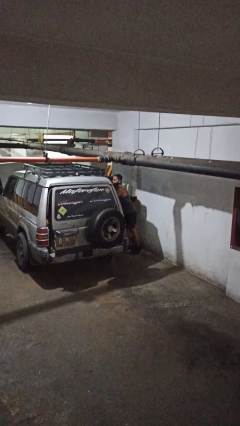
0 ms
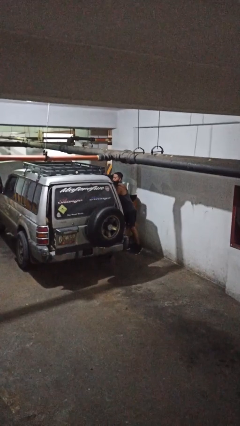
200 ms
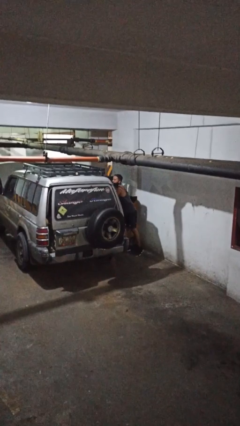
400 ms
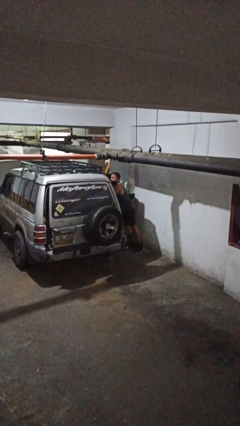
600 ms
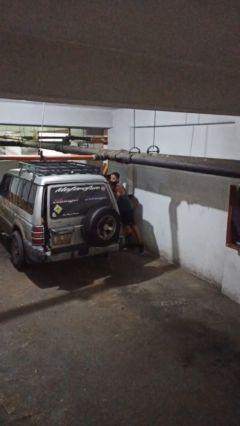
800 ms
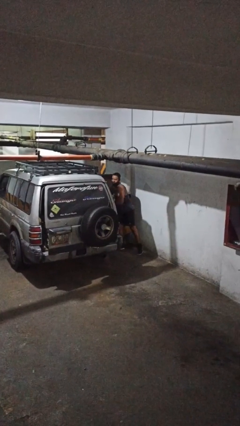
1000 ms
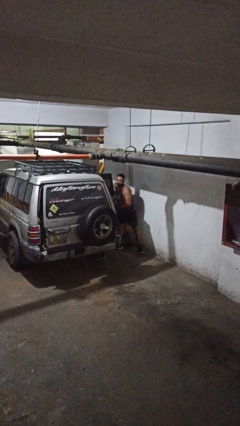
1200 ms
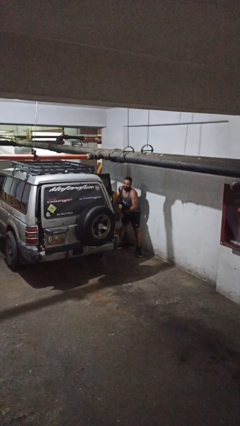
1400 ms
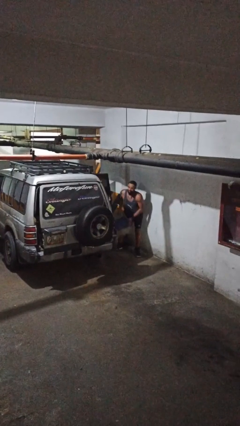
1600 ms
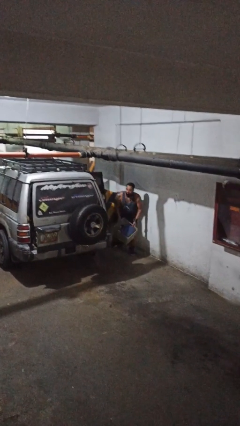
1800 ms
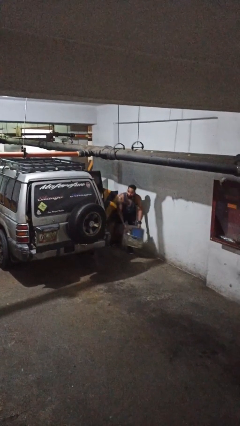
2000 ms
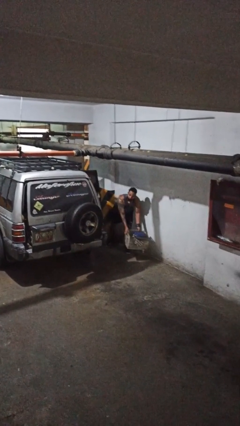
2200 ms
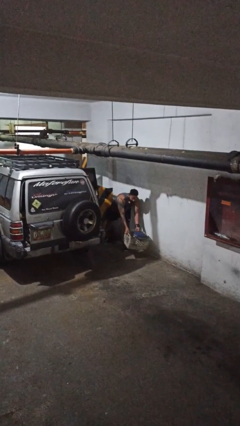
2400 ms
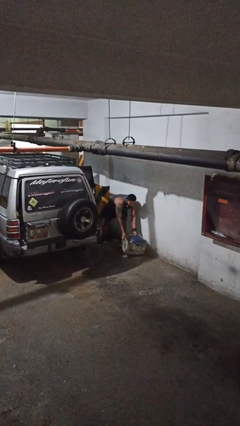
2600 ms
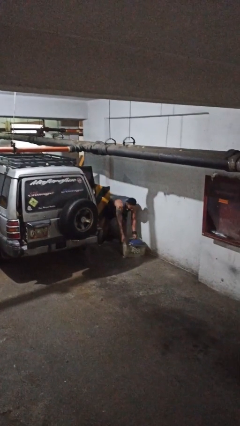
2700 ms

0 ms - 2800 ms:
person unloads car

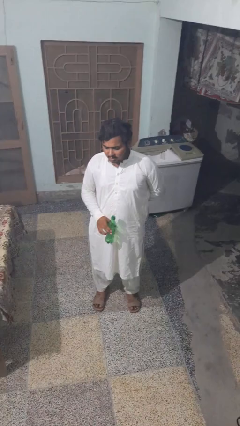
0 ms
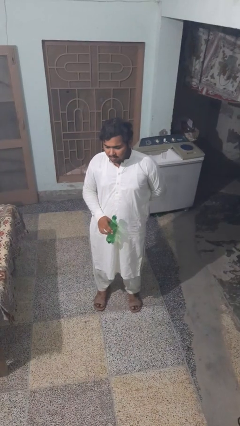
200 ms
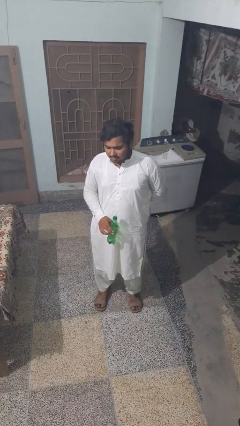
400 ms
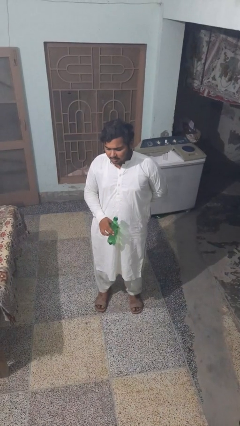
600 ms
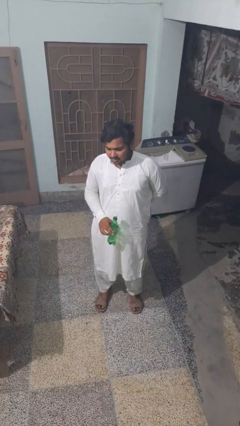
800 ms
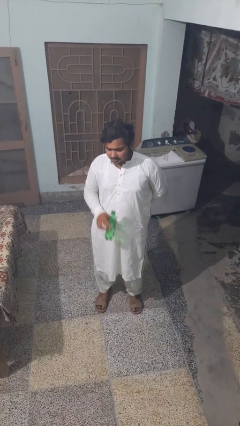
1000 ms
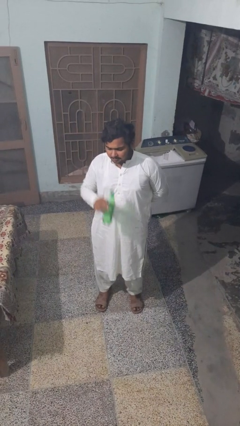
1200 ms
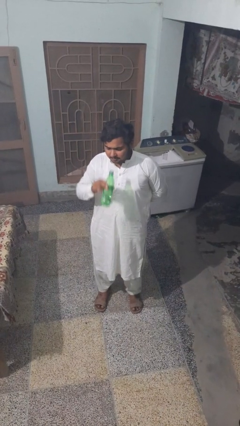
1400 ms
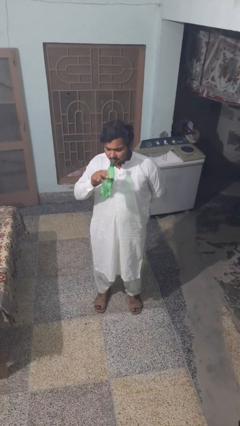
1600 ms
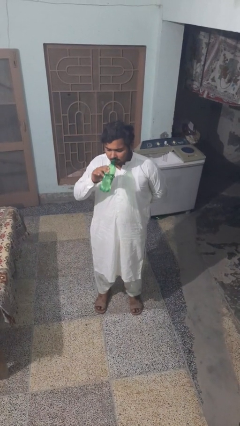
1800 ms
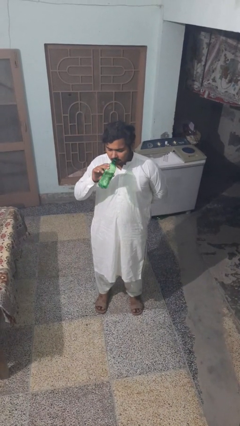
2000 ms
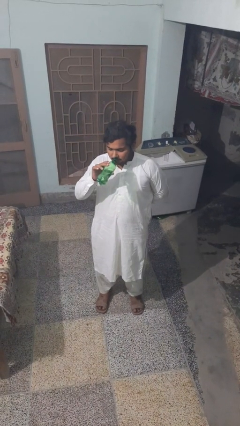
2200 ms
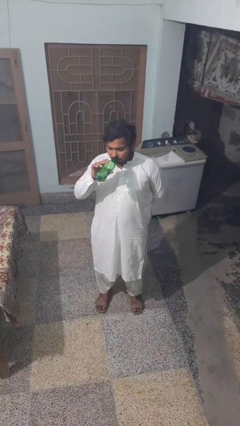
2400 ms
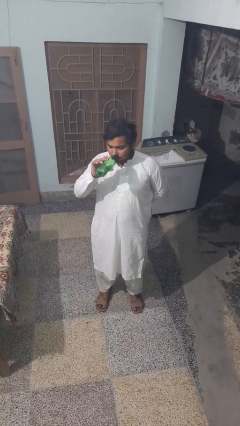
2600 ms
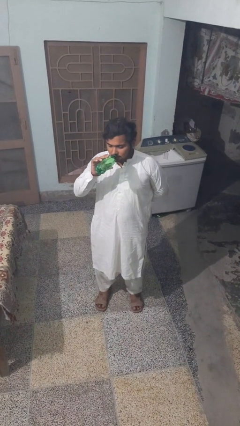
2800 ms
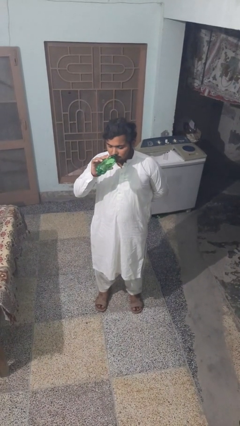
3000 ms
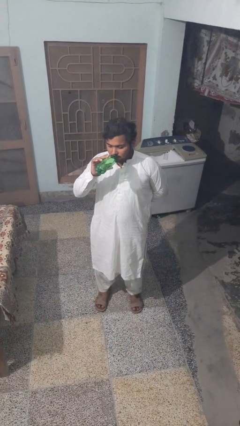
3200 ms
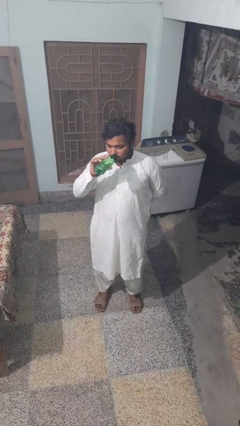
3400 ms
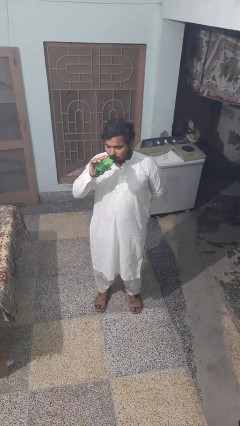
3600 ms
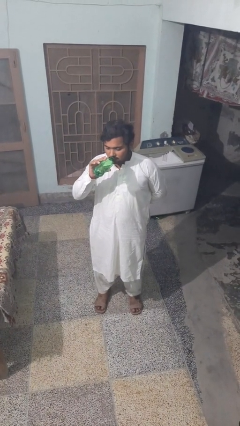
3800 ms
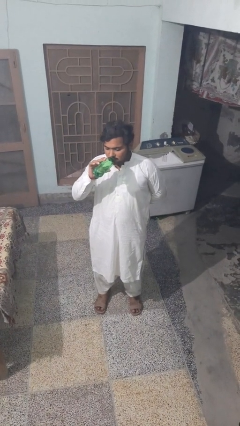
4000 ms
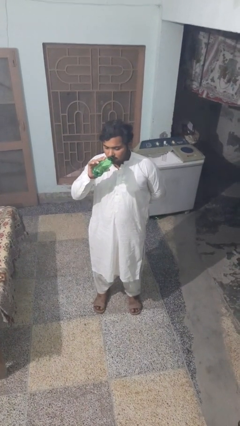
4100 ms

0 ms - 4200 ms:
person drinks from bottle

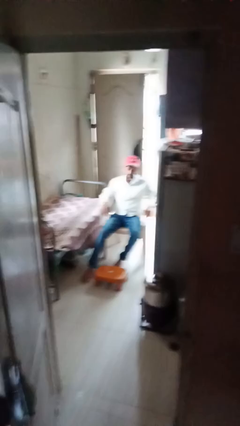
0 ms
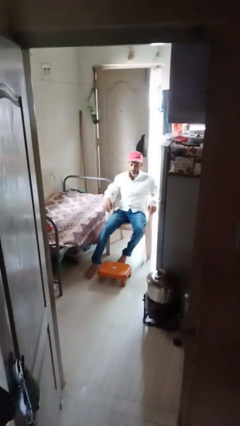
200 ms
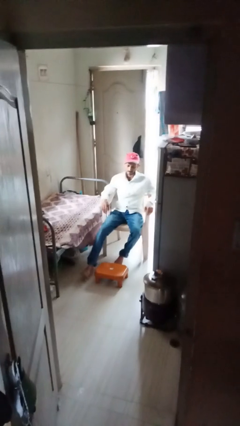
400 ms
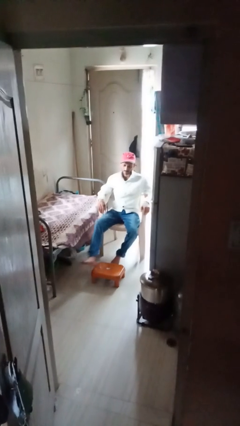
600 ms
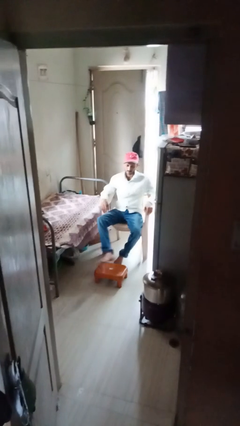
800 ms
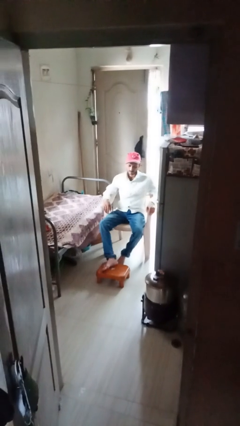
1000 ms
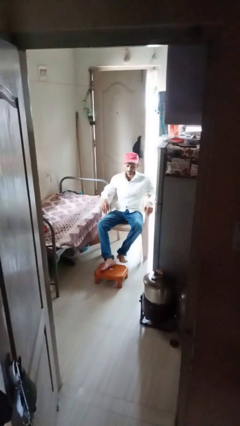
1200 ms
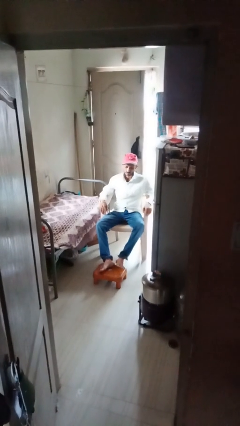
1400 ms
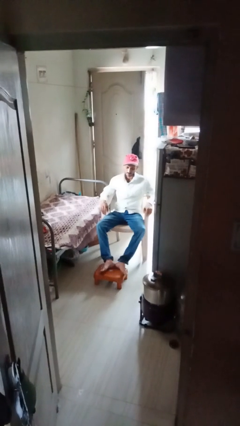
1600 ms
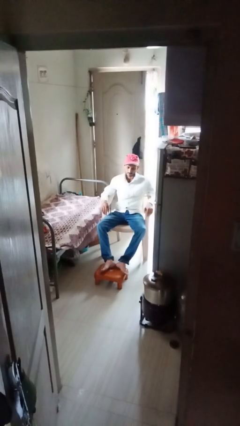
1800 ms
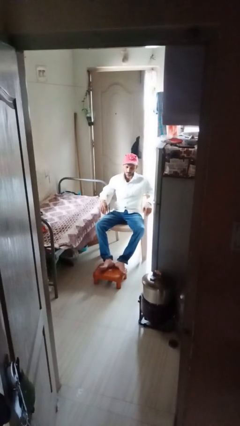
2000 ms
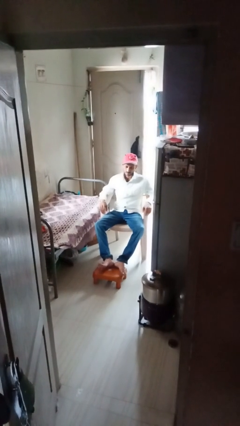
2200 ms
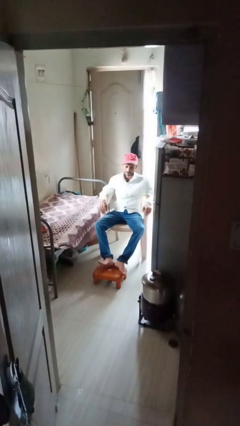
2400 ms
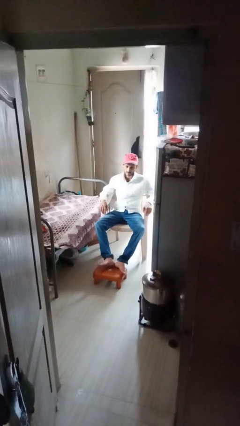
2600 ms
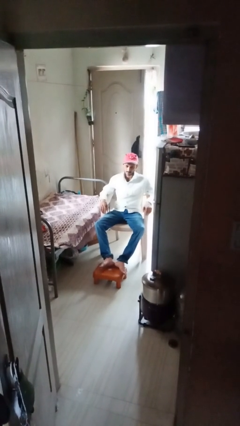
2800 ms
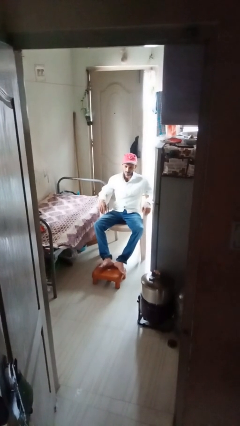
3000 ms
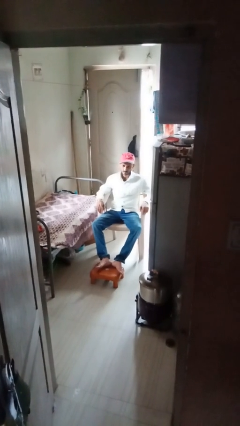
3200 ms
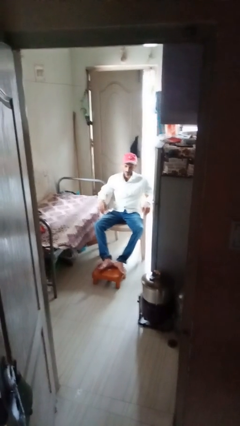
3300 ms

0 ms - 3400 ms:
person puts feet up

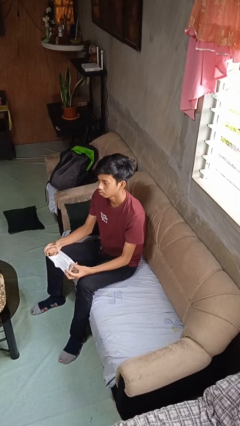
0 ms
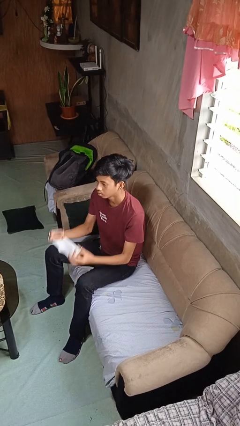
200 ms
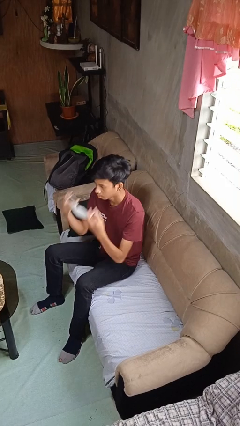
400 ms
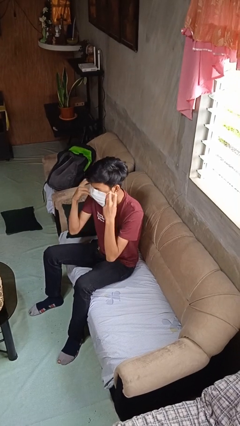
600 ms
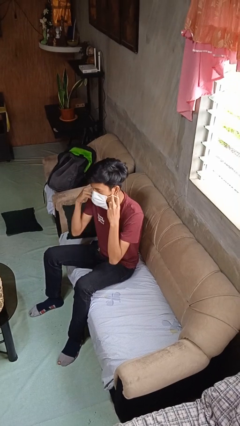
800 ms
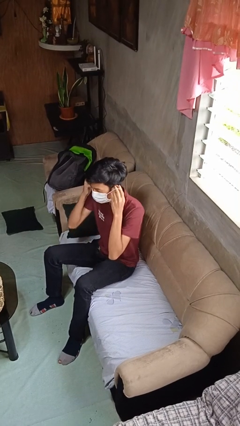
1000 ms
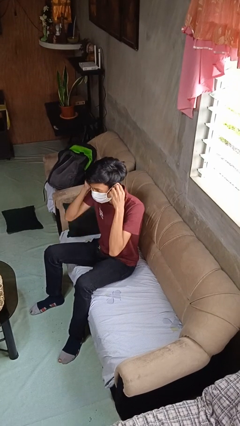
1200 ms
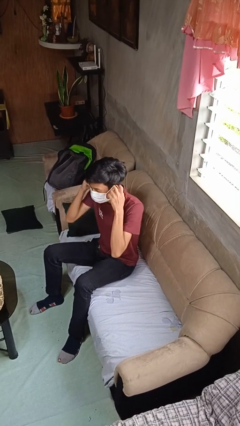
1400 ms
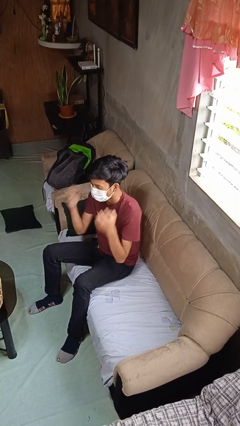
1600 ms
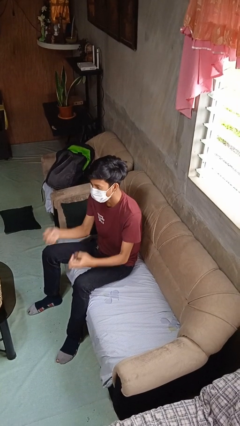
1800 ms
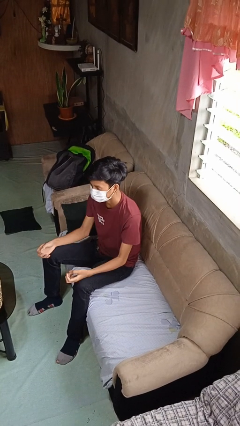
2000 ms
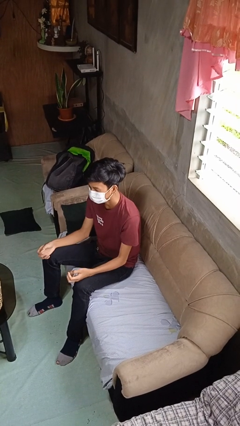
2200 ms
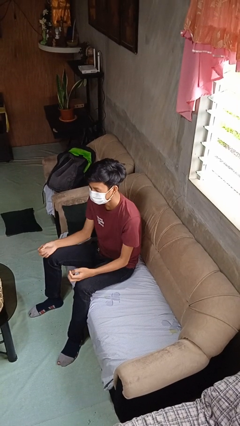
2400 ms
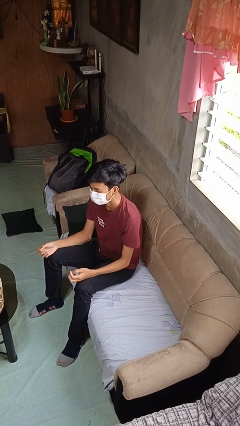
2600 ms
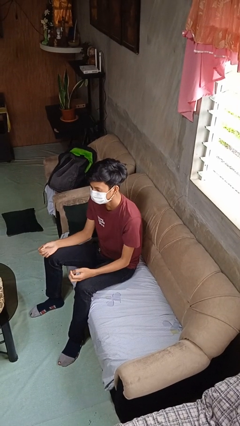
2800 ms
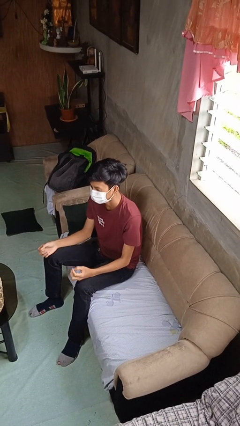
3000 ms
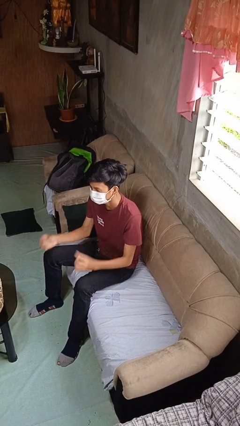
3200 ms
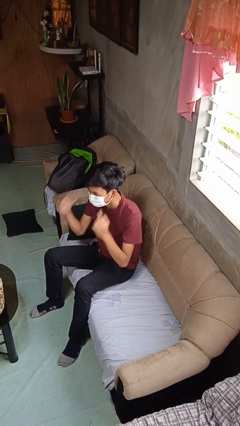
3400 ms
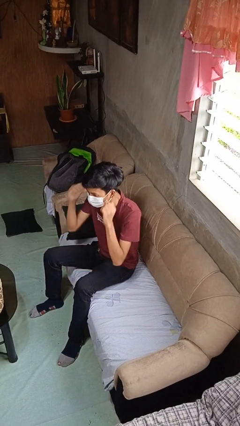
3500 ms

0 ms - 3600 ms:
person puts on facemask

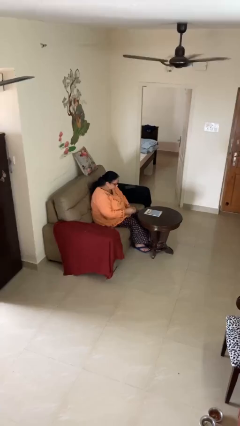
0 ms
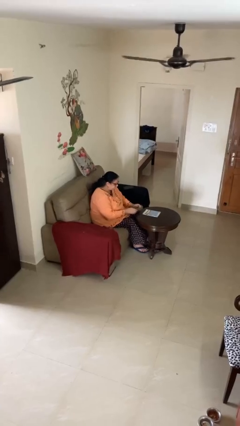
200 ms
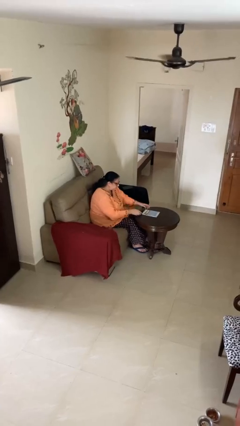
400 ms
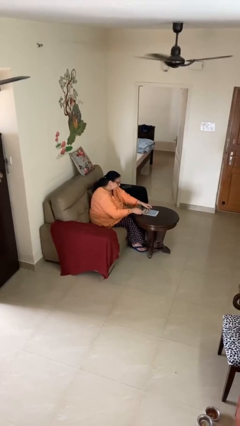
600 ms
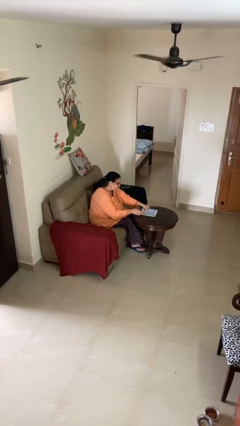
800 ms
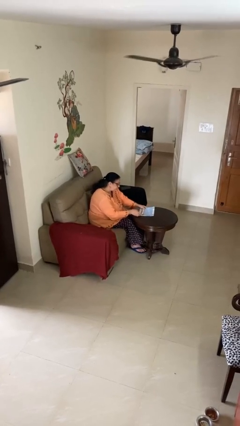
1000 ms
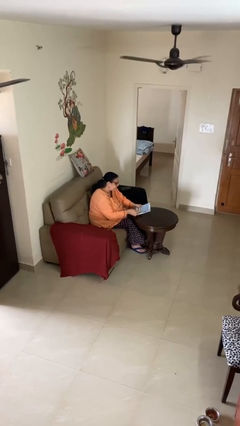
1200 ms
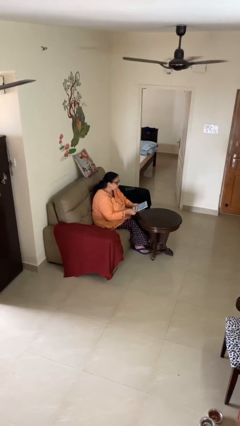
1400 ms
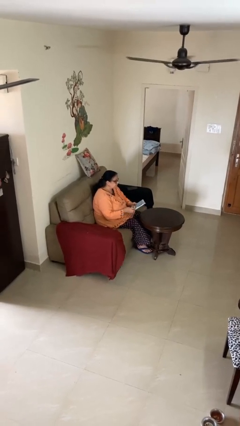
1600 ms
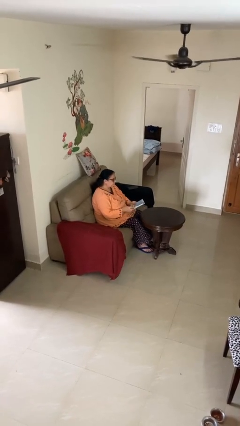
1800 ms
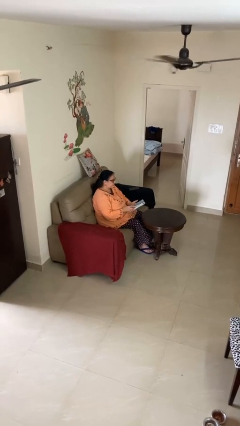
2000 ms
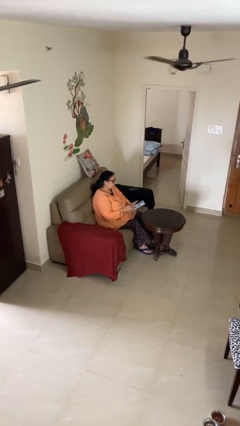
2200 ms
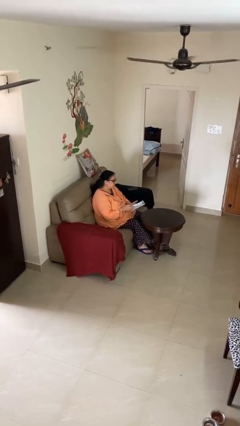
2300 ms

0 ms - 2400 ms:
person picks up object from table

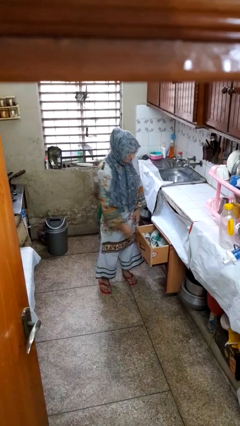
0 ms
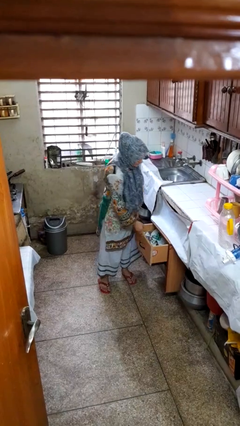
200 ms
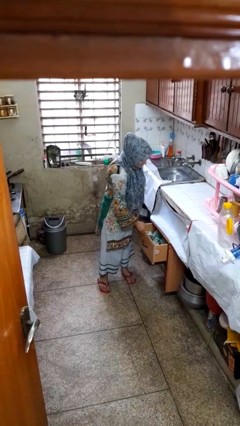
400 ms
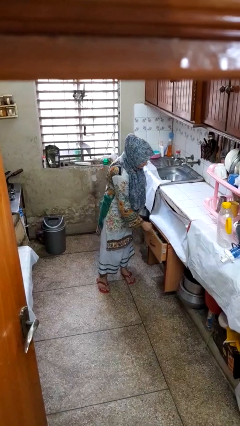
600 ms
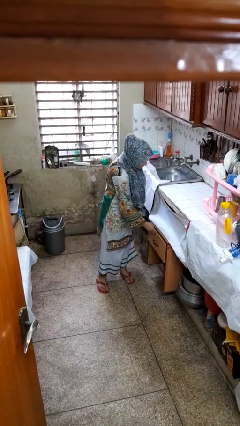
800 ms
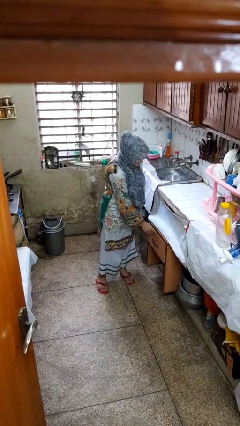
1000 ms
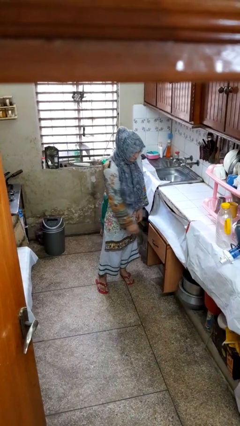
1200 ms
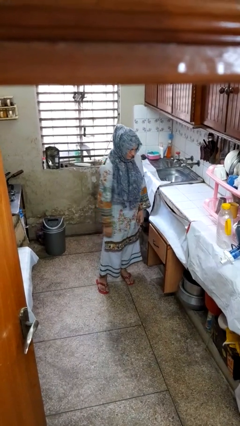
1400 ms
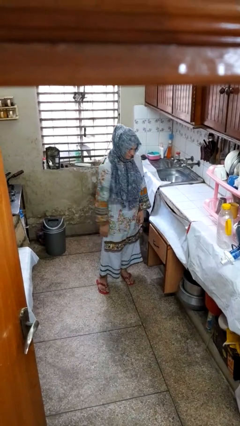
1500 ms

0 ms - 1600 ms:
person closes kitchen drawer
